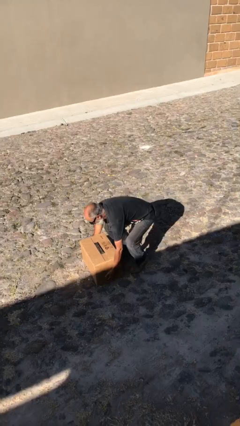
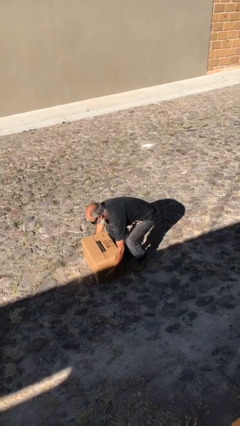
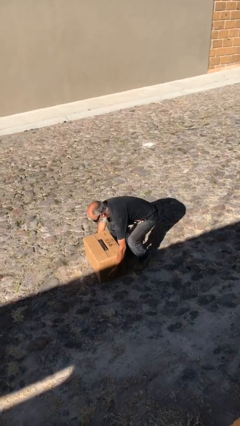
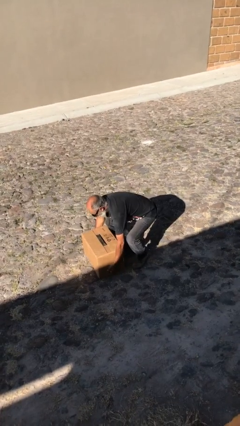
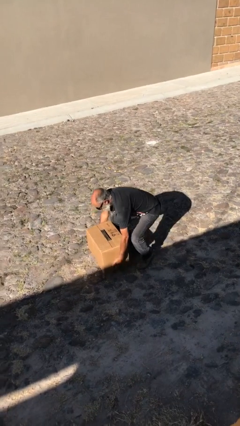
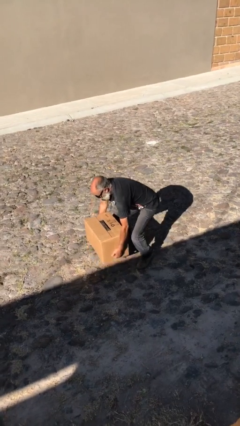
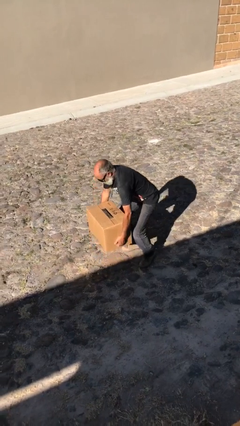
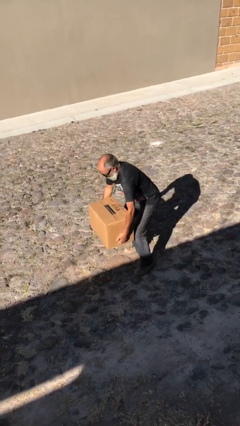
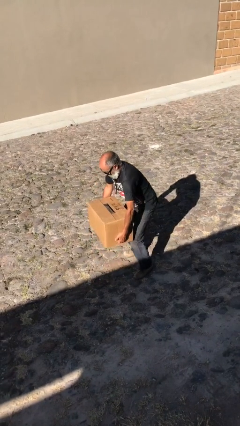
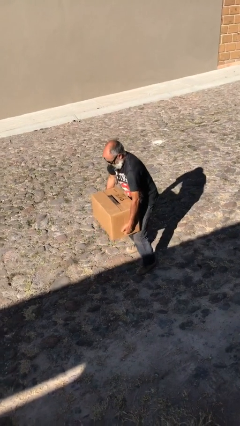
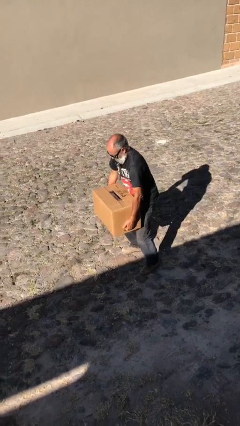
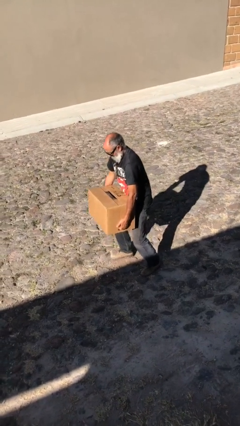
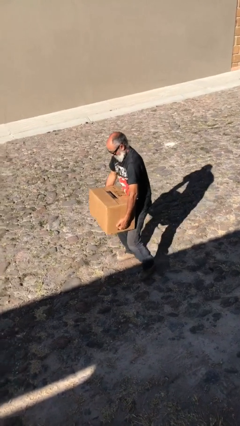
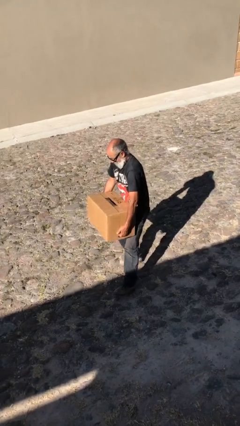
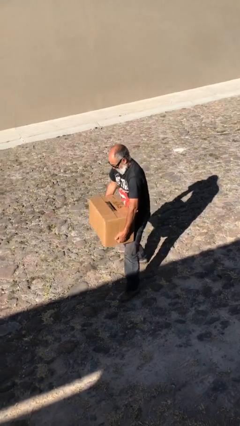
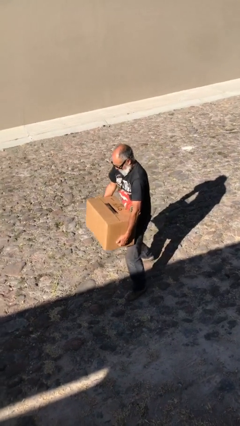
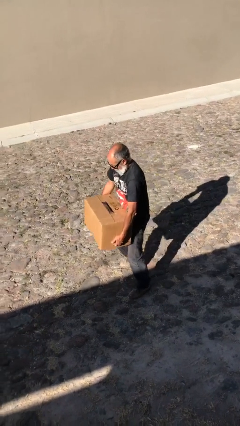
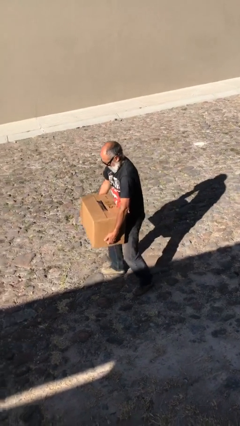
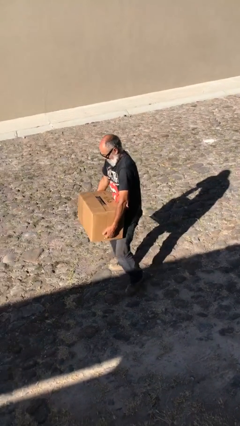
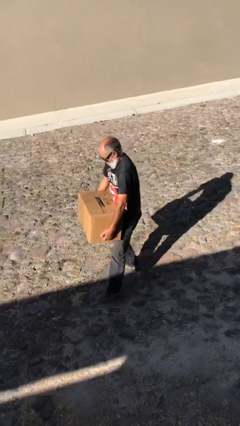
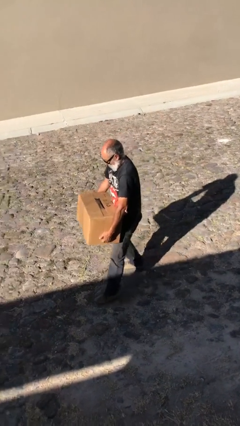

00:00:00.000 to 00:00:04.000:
person carries heavy object

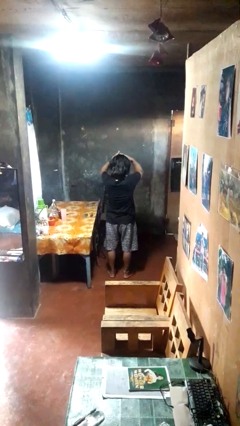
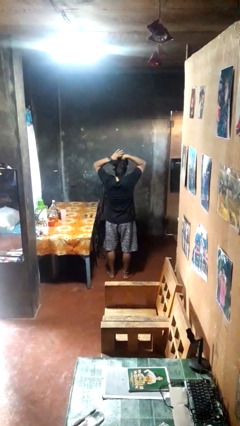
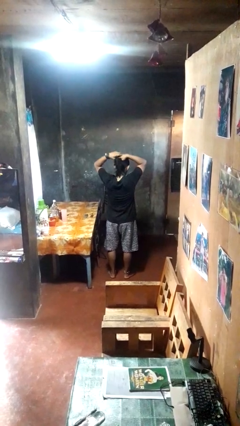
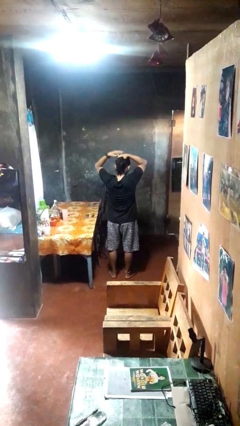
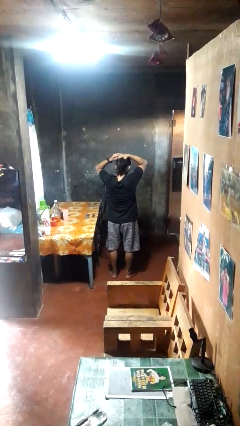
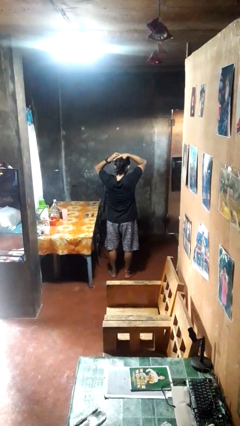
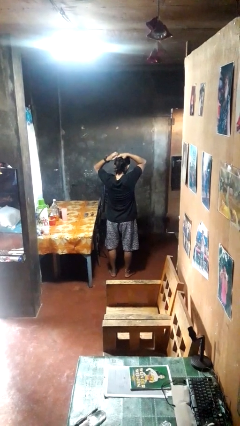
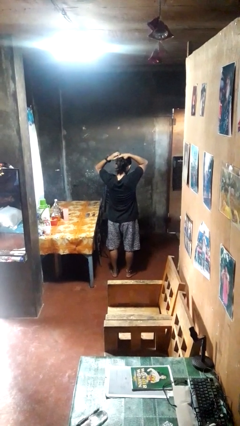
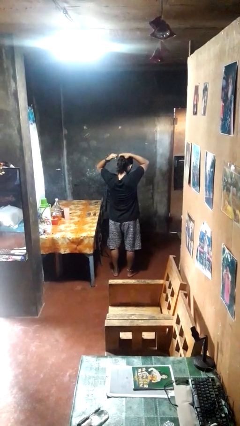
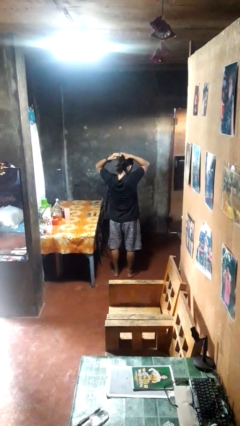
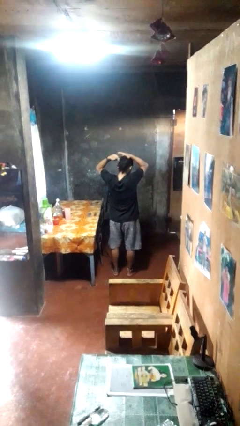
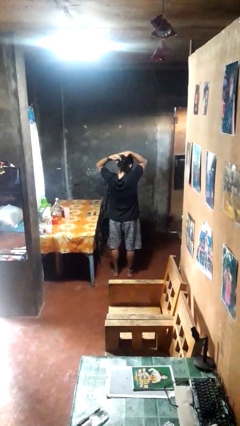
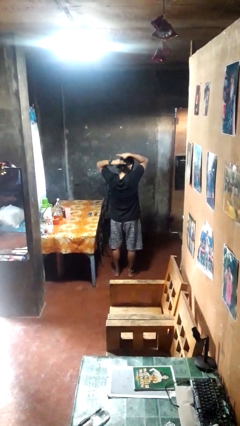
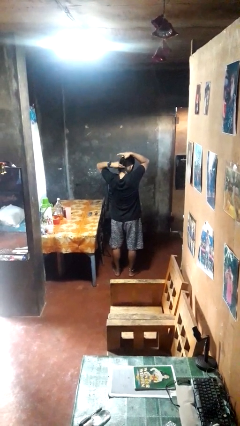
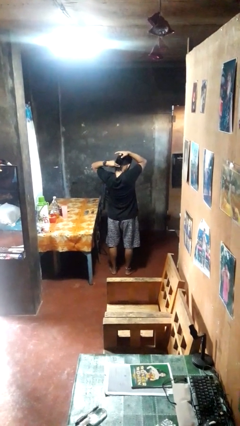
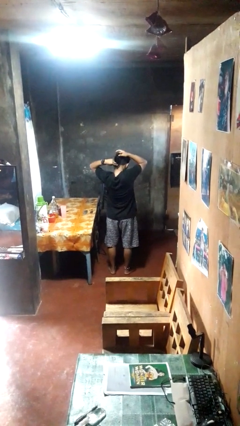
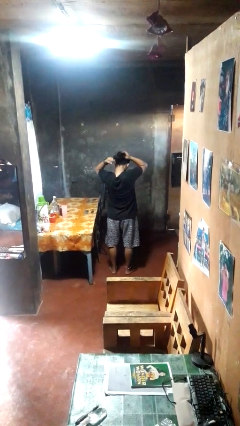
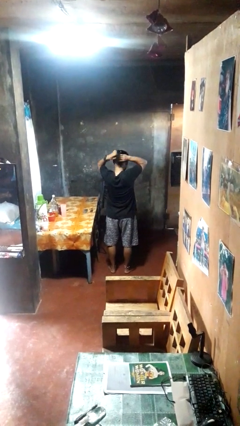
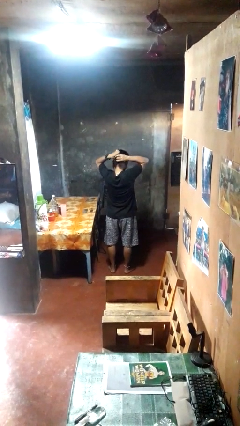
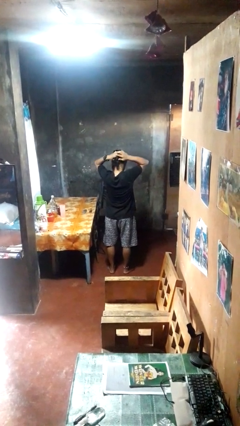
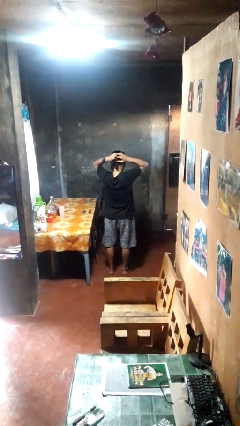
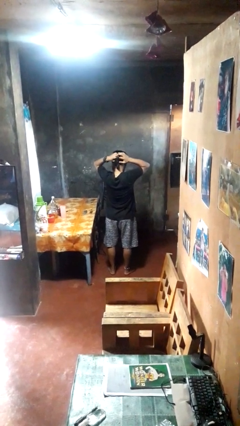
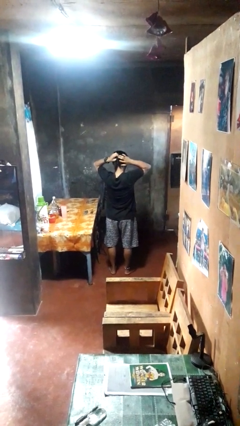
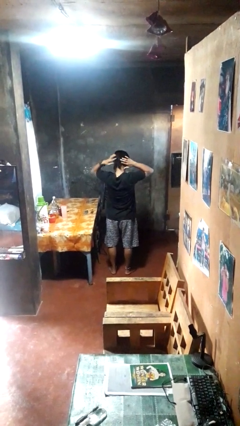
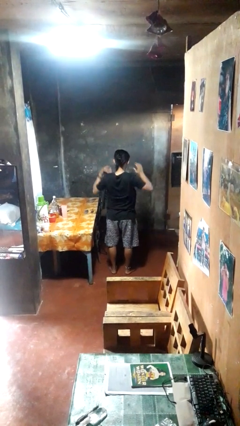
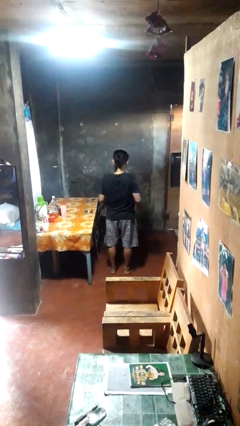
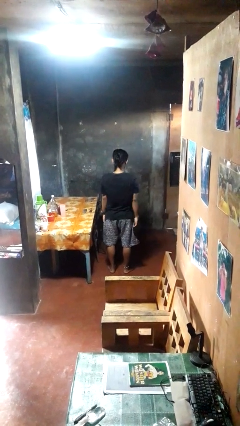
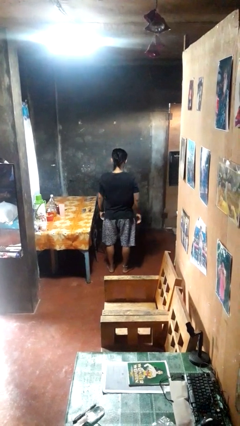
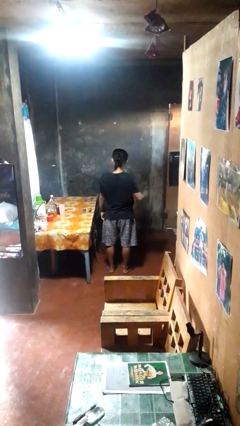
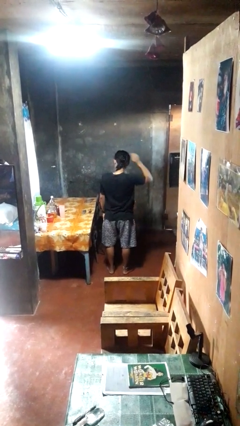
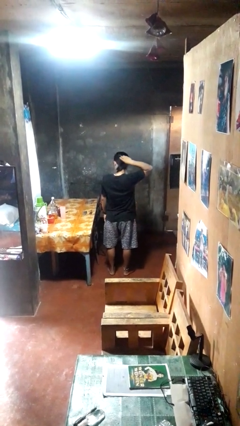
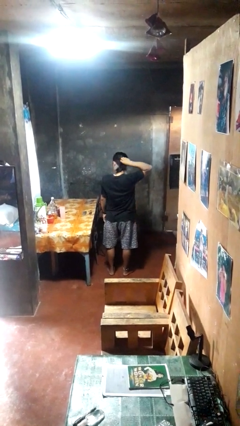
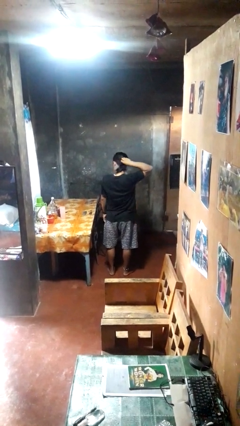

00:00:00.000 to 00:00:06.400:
person puts hair in ponytail

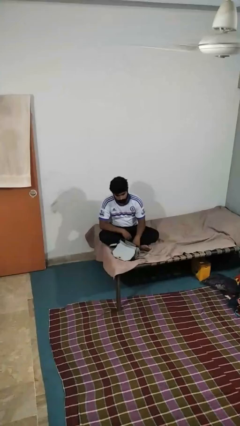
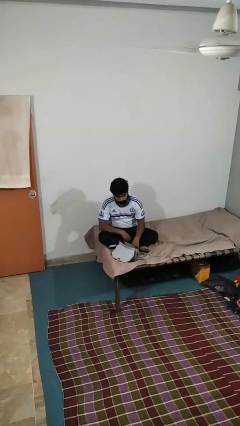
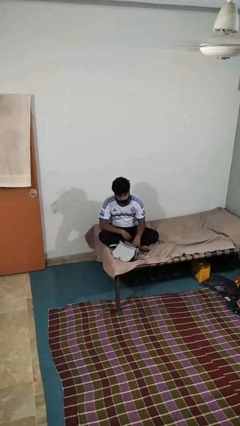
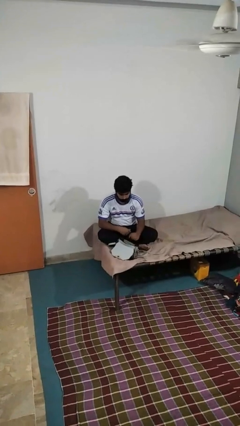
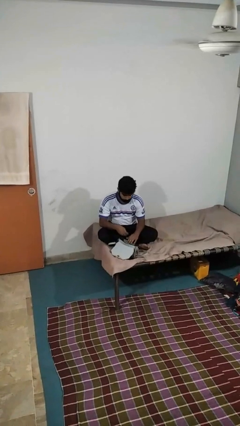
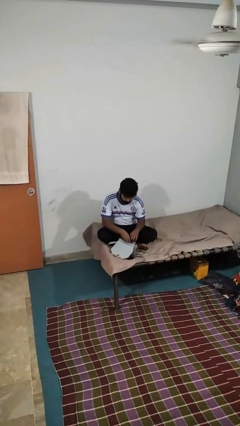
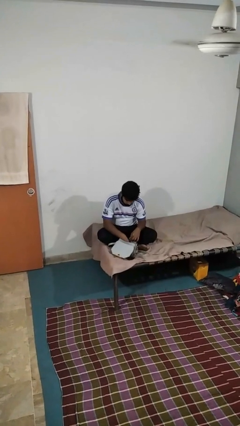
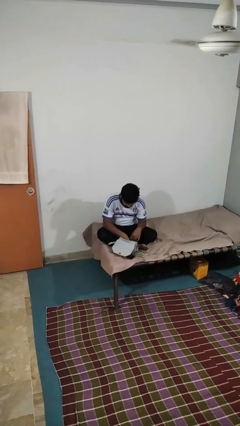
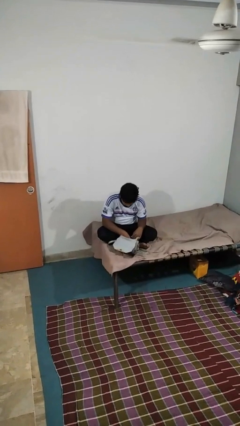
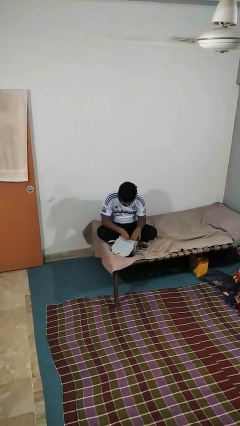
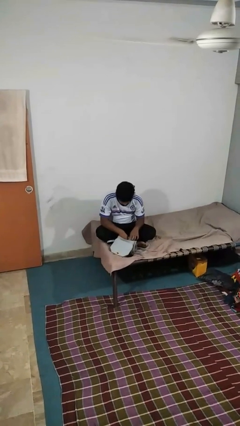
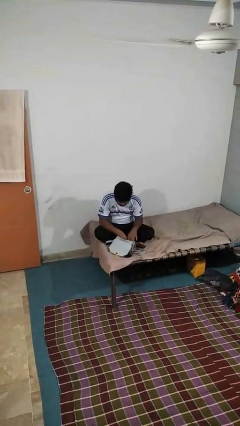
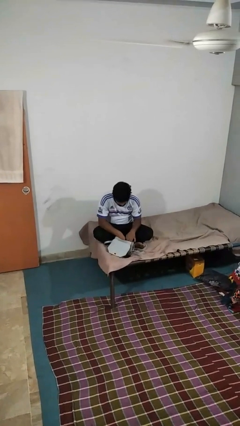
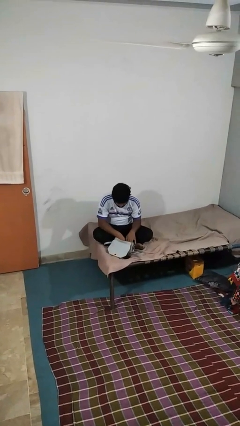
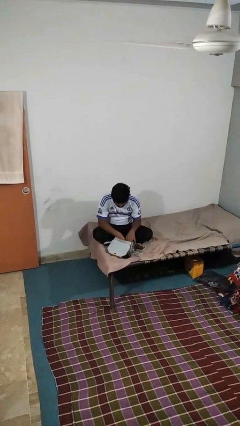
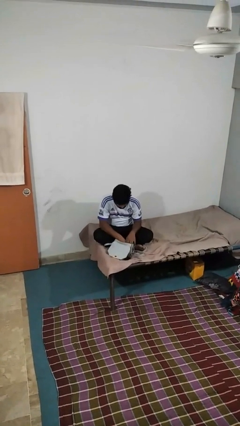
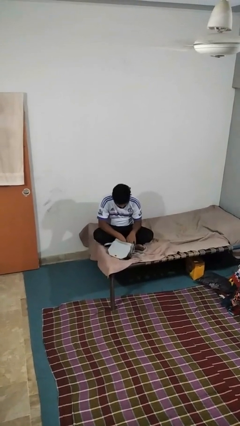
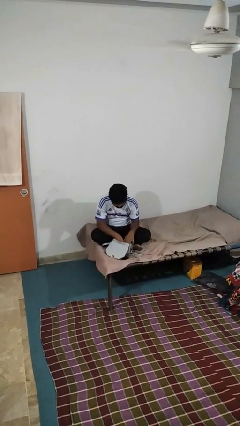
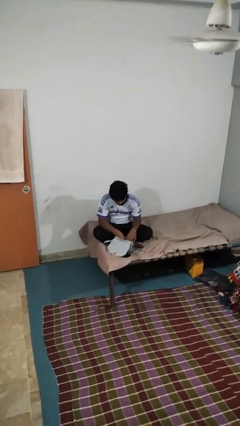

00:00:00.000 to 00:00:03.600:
person searches in purse

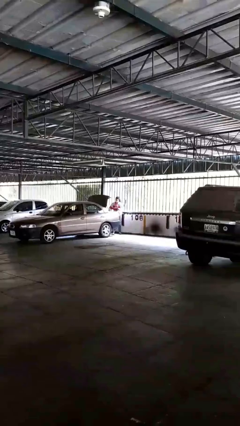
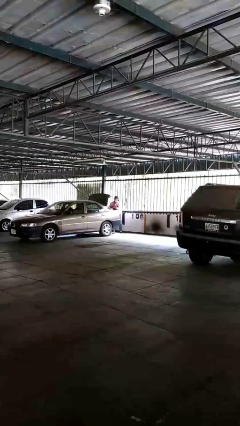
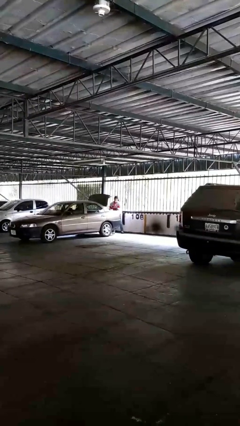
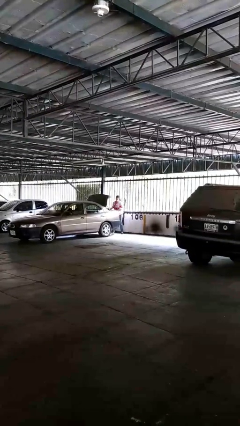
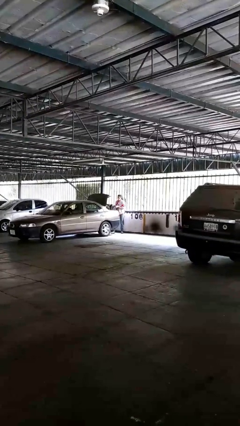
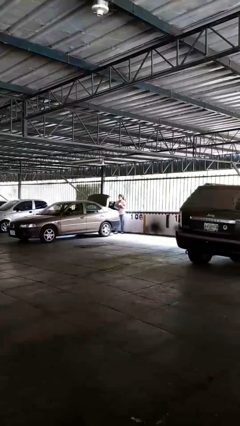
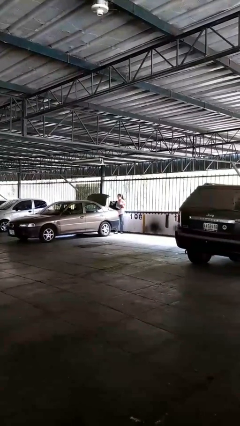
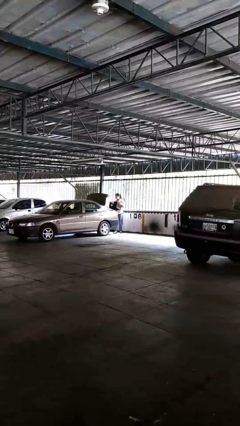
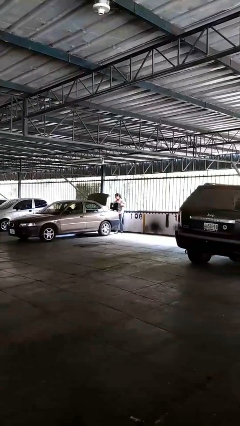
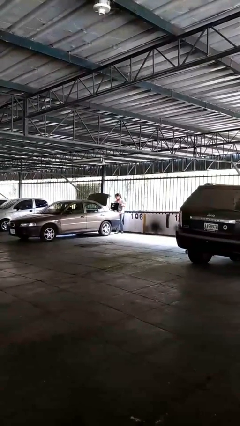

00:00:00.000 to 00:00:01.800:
person unloads car

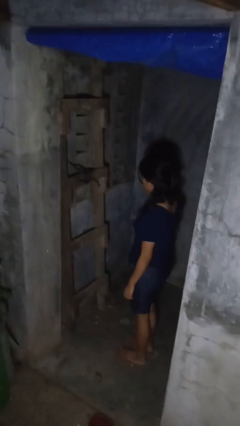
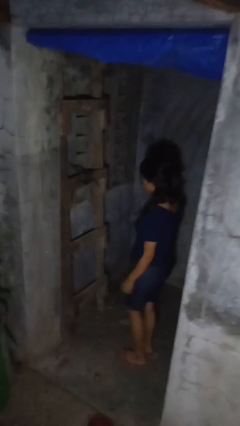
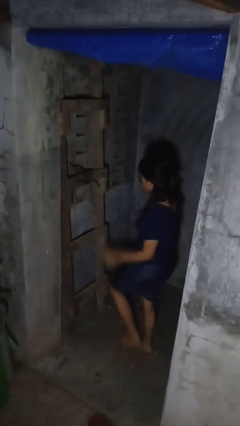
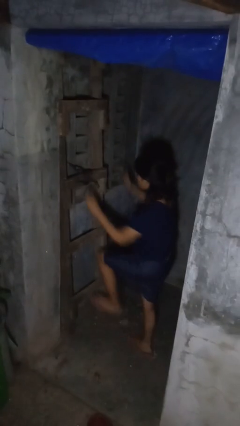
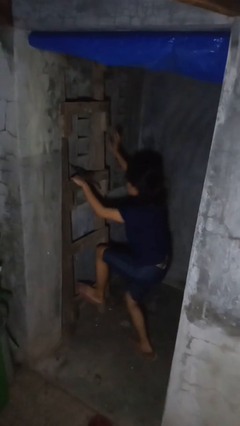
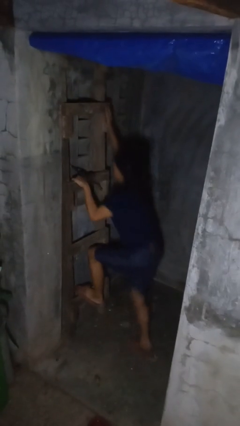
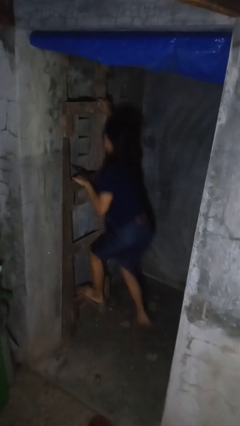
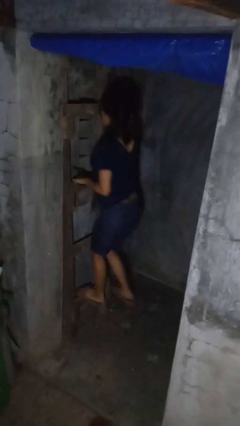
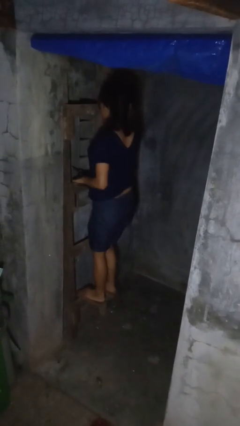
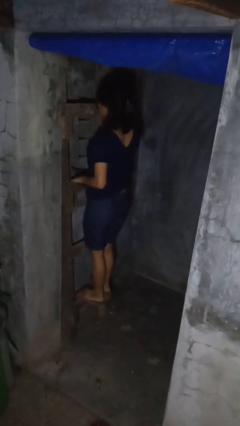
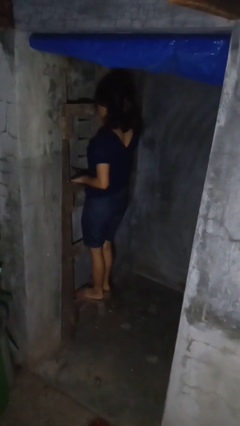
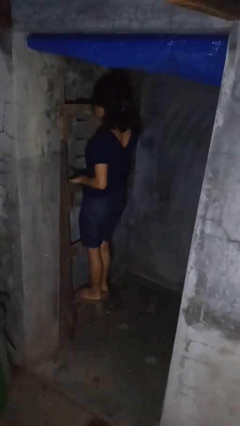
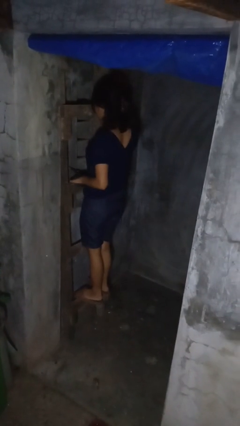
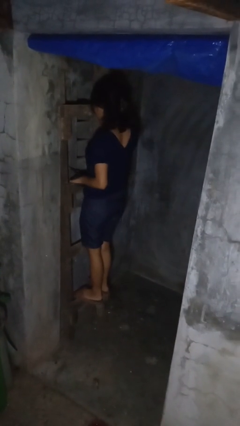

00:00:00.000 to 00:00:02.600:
person climbs up ladder
